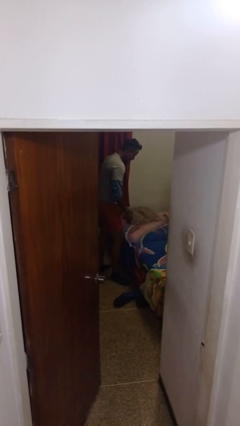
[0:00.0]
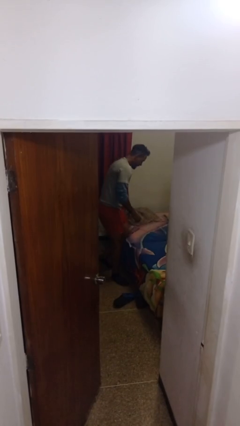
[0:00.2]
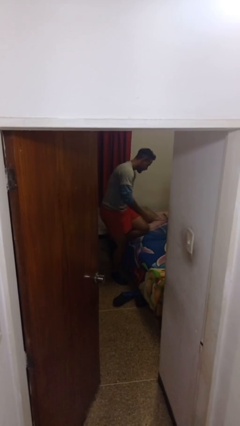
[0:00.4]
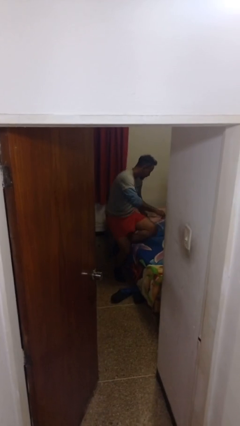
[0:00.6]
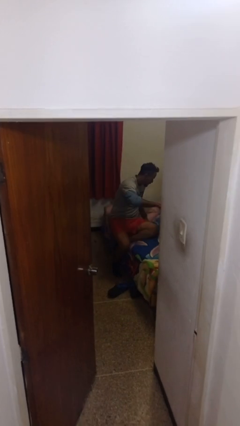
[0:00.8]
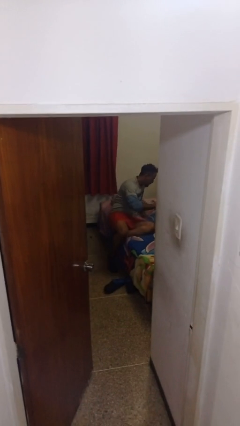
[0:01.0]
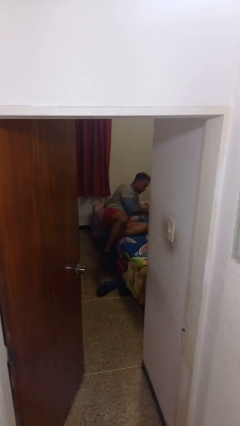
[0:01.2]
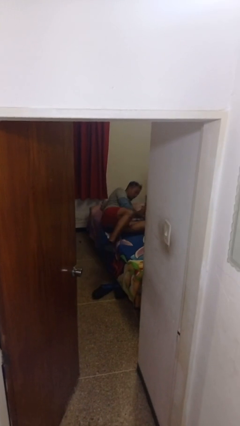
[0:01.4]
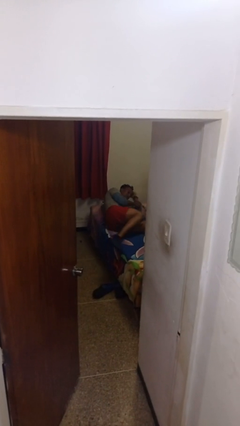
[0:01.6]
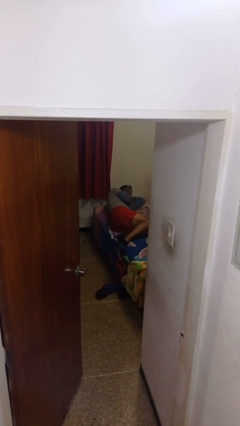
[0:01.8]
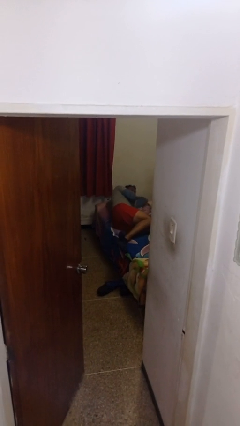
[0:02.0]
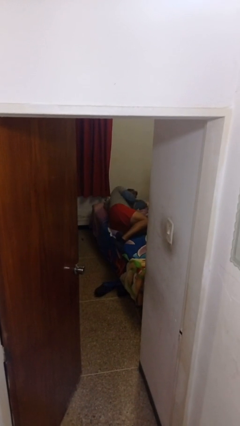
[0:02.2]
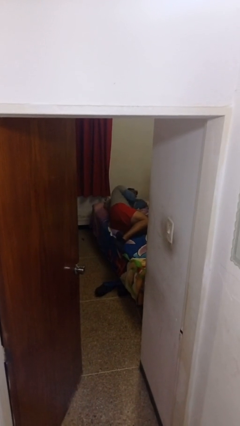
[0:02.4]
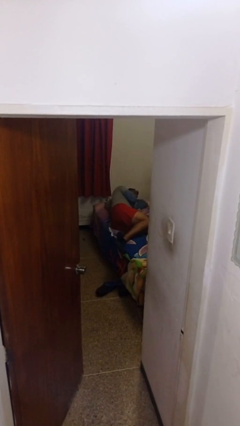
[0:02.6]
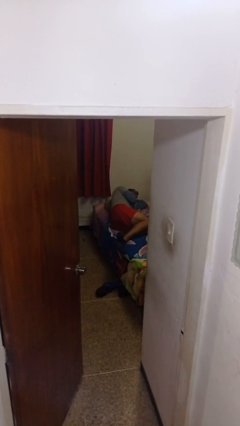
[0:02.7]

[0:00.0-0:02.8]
person lies down on bed

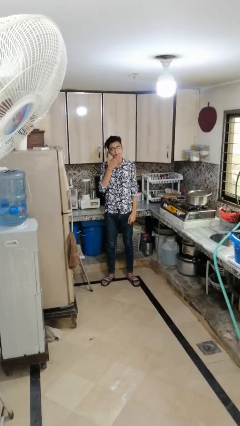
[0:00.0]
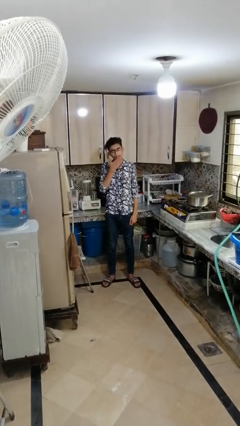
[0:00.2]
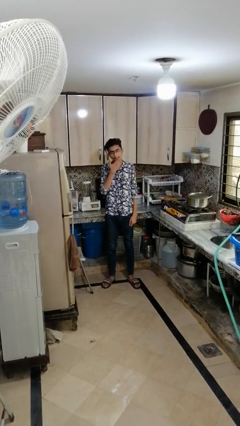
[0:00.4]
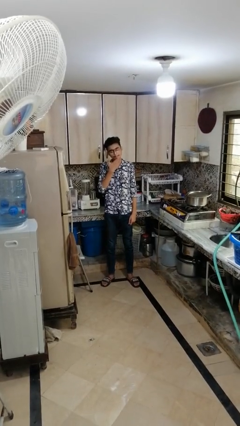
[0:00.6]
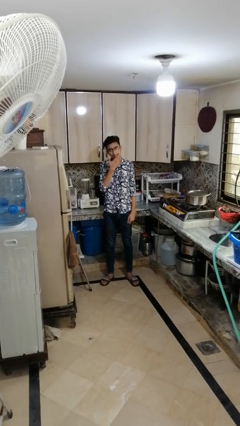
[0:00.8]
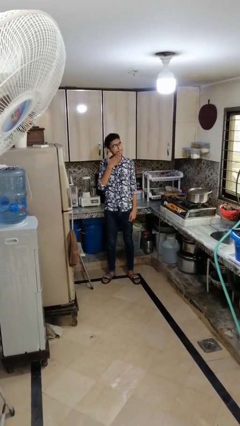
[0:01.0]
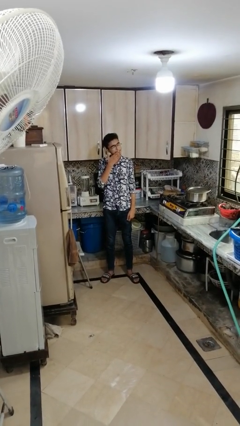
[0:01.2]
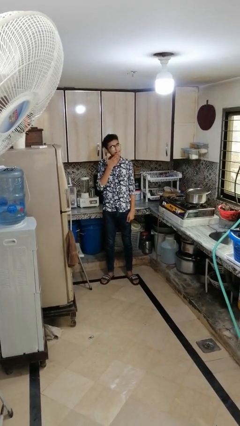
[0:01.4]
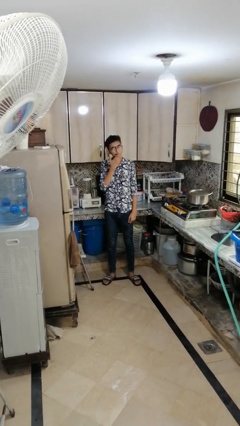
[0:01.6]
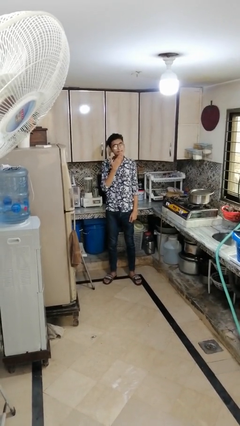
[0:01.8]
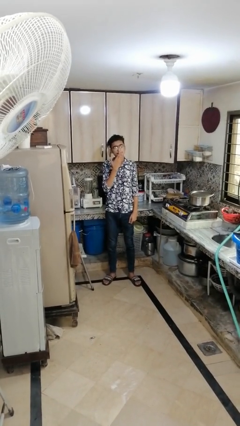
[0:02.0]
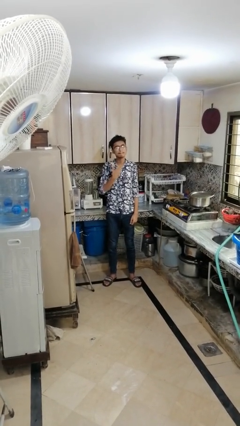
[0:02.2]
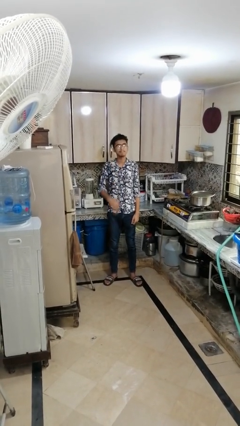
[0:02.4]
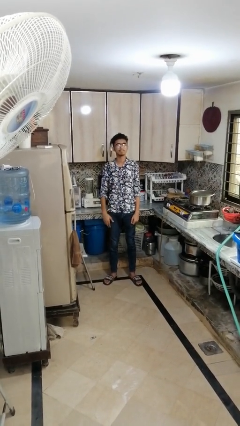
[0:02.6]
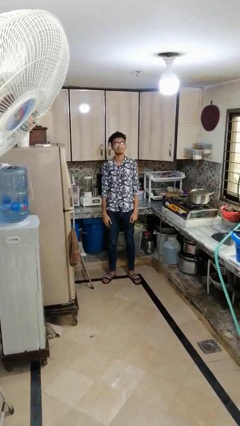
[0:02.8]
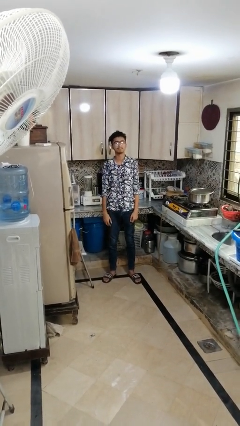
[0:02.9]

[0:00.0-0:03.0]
person strokes chin

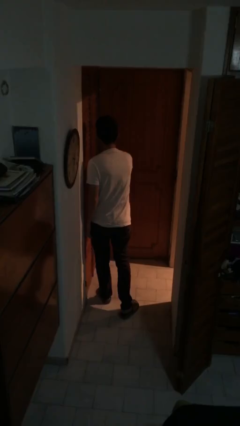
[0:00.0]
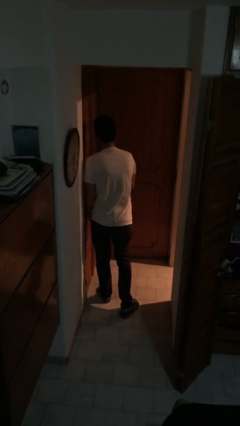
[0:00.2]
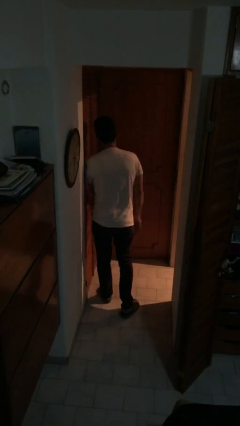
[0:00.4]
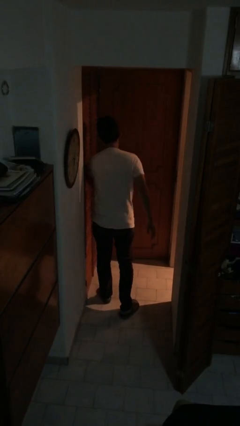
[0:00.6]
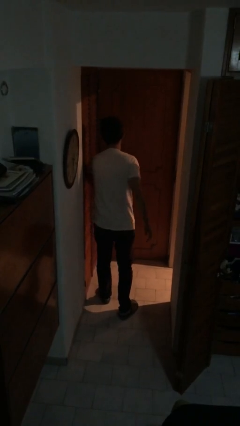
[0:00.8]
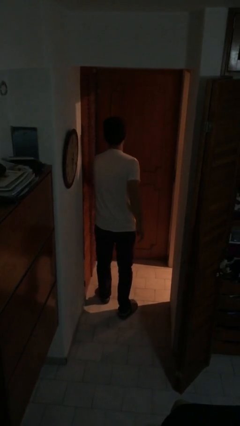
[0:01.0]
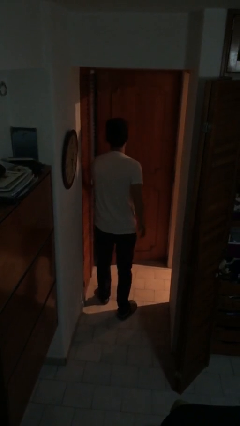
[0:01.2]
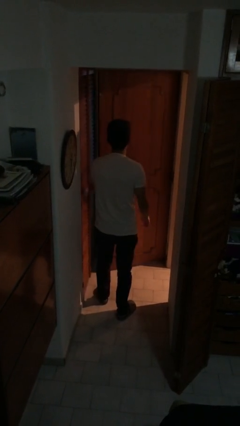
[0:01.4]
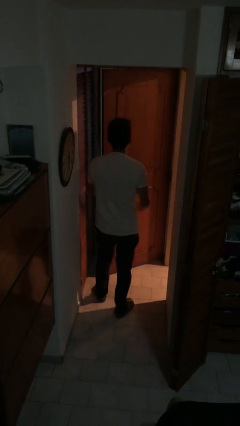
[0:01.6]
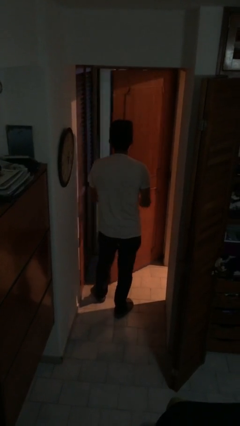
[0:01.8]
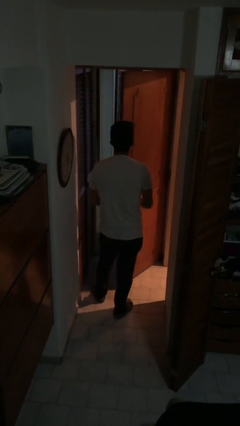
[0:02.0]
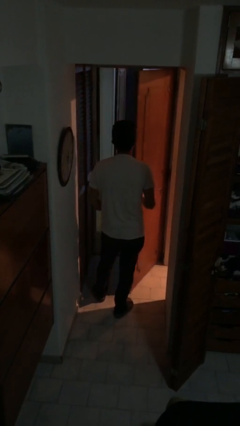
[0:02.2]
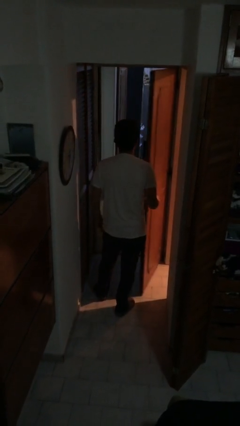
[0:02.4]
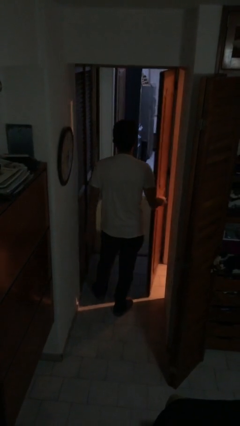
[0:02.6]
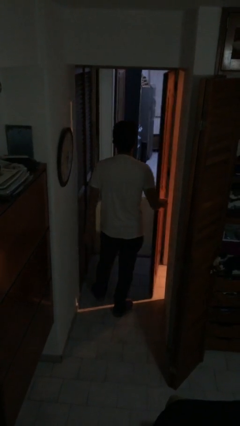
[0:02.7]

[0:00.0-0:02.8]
person opens facility door

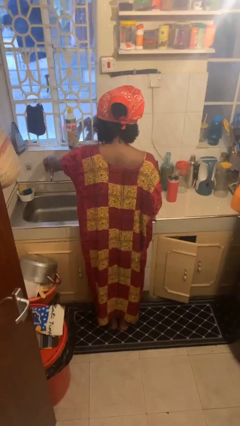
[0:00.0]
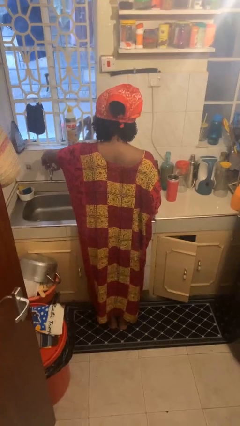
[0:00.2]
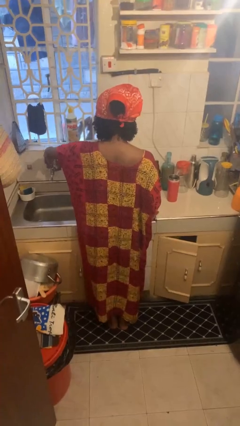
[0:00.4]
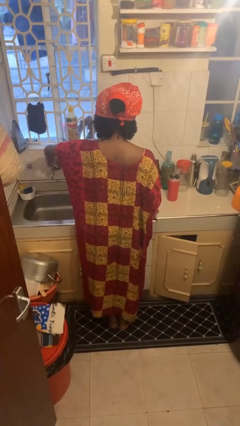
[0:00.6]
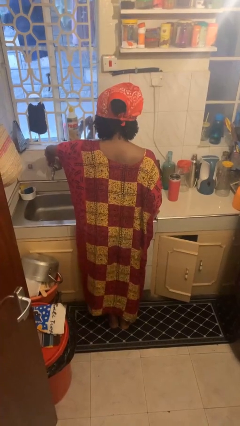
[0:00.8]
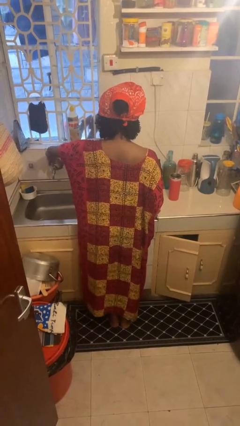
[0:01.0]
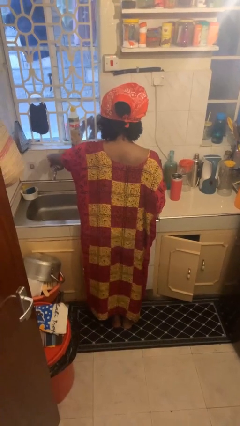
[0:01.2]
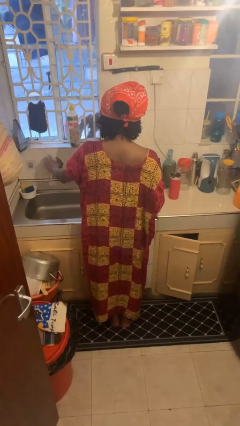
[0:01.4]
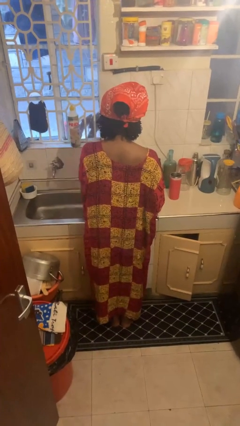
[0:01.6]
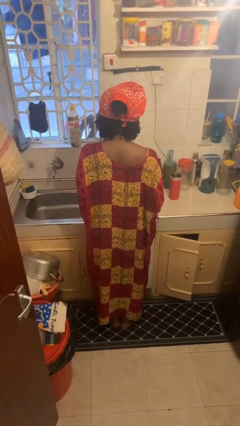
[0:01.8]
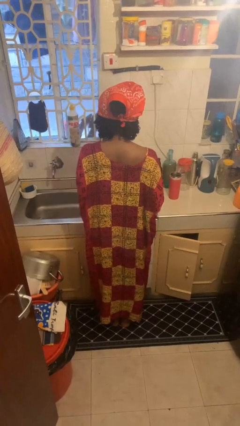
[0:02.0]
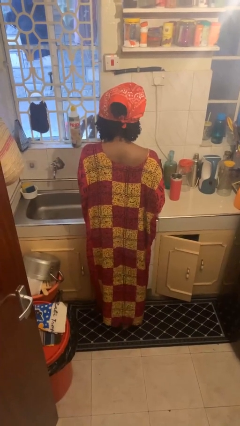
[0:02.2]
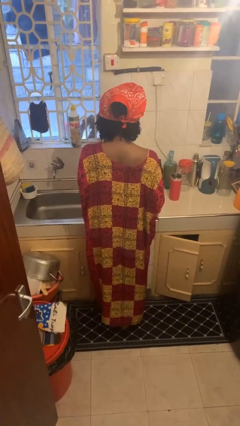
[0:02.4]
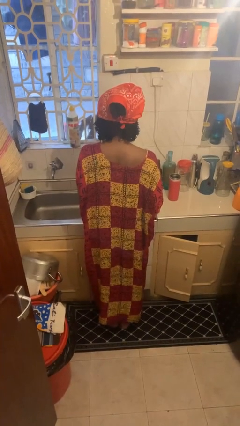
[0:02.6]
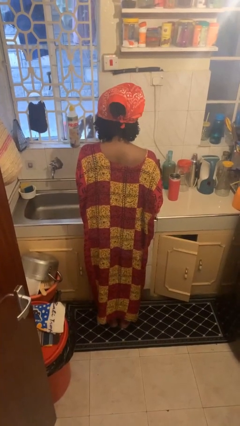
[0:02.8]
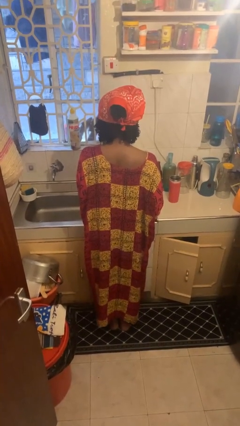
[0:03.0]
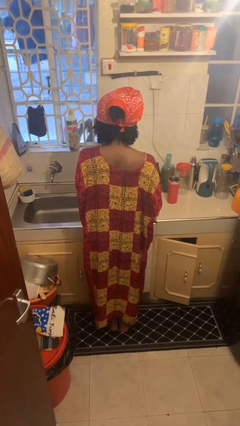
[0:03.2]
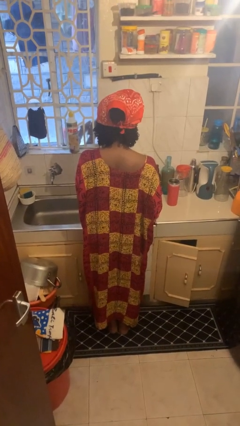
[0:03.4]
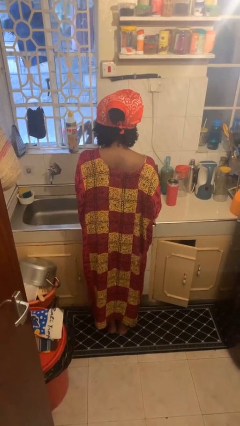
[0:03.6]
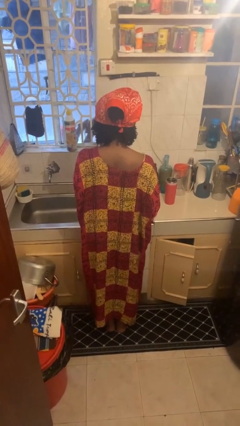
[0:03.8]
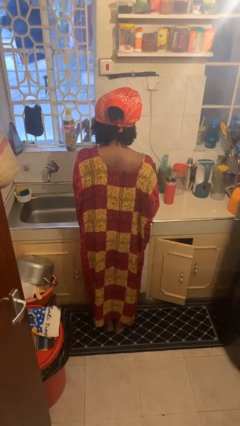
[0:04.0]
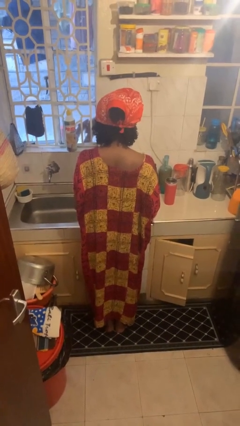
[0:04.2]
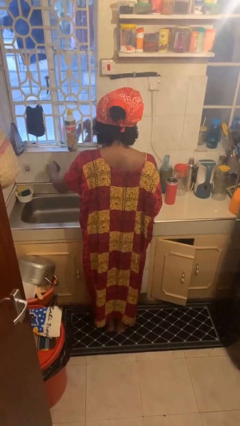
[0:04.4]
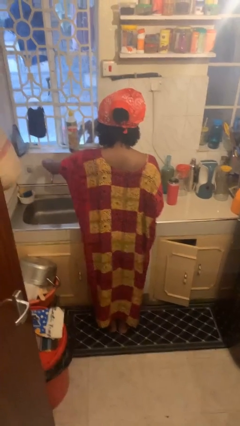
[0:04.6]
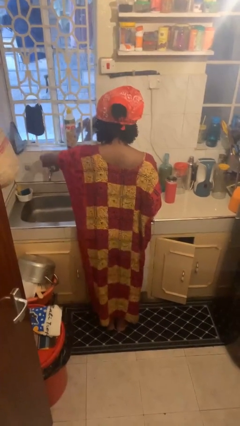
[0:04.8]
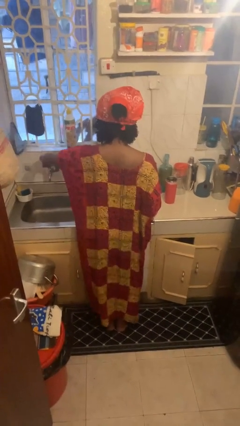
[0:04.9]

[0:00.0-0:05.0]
person turns off faucet

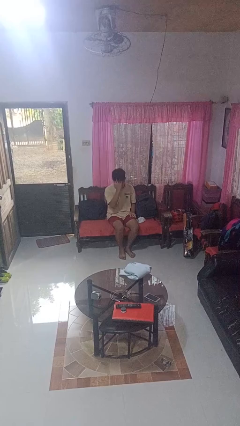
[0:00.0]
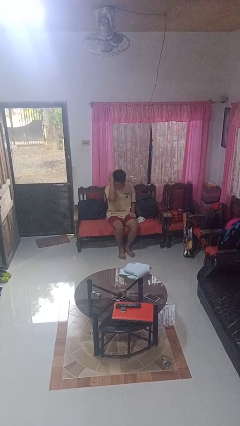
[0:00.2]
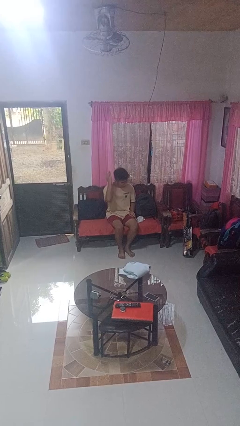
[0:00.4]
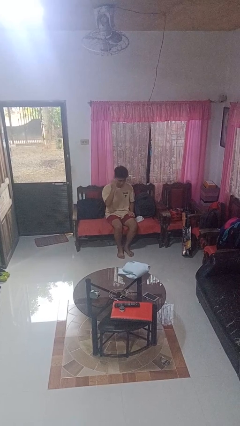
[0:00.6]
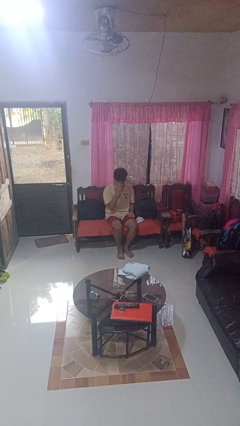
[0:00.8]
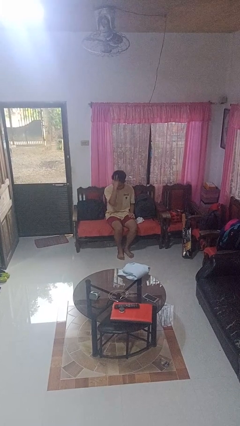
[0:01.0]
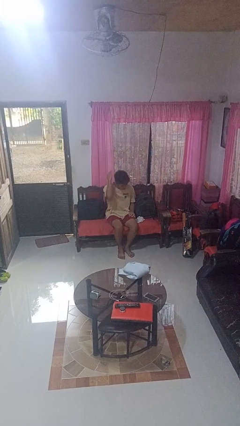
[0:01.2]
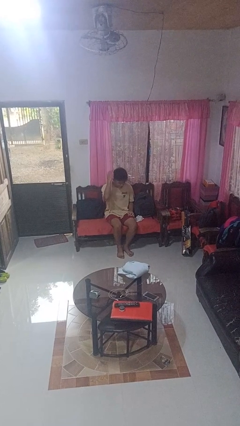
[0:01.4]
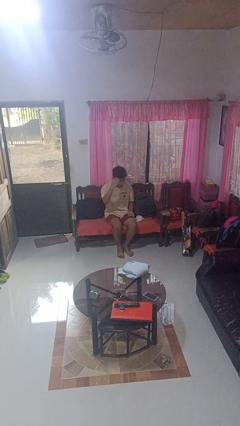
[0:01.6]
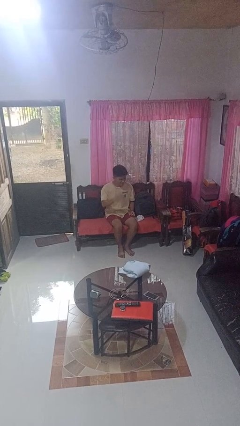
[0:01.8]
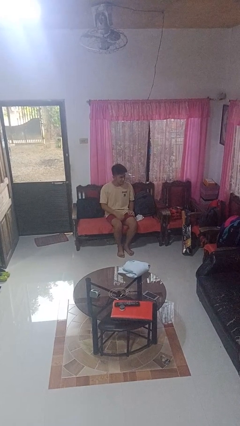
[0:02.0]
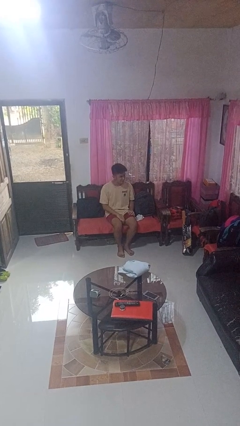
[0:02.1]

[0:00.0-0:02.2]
person strokes hair

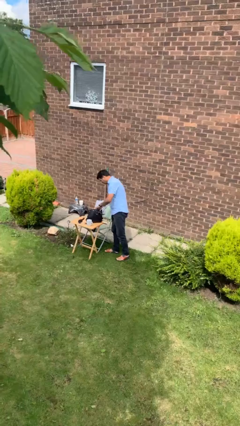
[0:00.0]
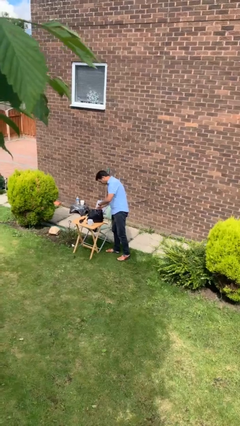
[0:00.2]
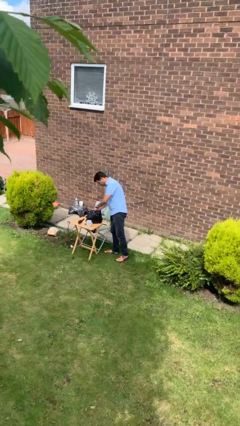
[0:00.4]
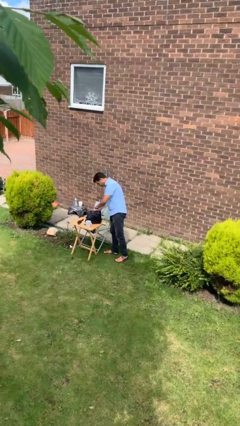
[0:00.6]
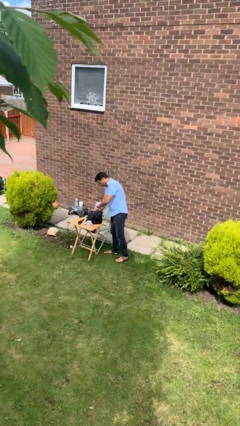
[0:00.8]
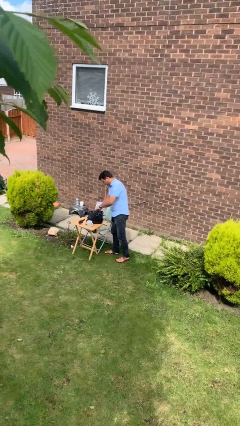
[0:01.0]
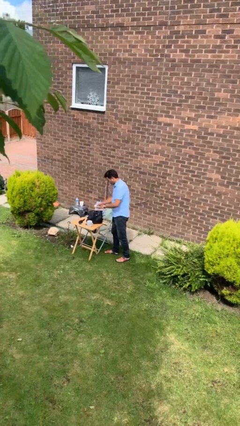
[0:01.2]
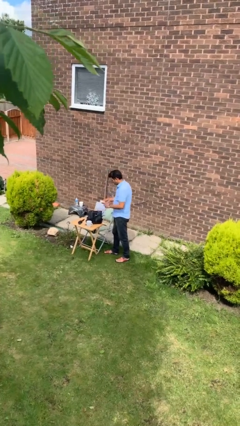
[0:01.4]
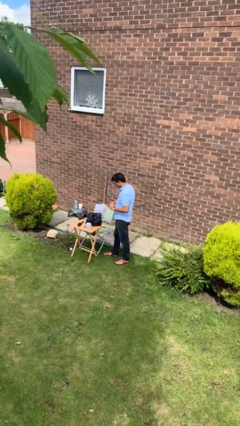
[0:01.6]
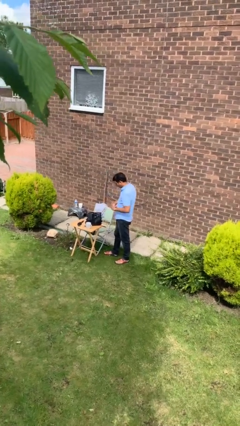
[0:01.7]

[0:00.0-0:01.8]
person takes object from backpack

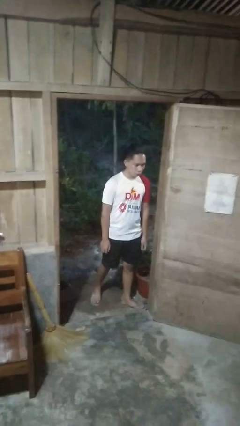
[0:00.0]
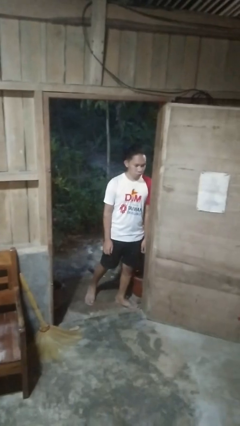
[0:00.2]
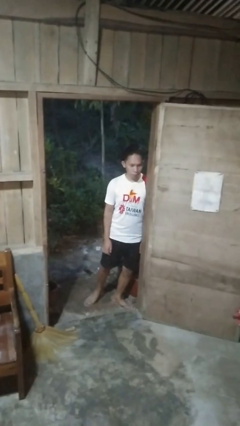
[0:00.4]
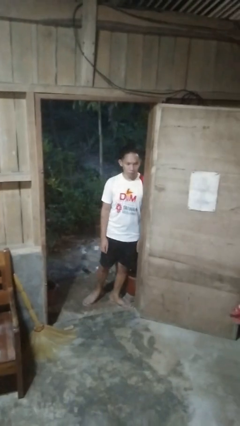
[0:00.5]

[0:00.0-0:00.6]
person bumps into wall
